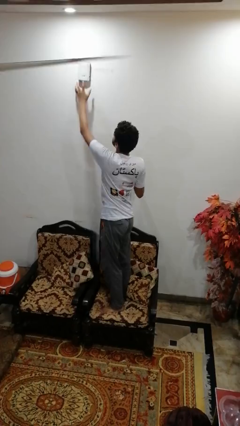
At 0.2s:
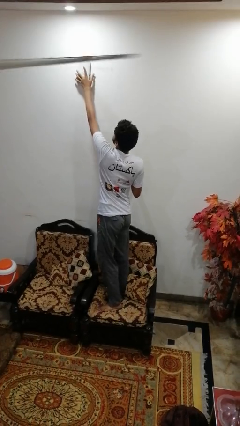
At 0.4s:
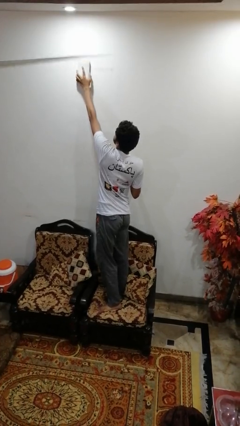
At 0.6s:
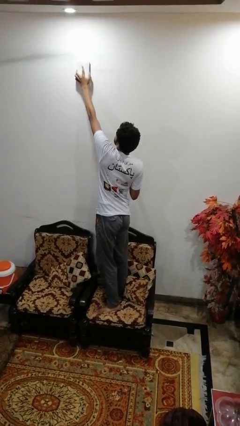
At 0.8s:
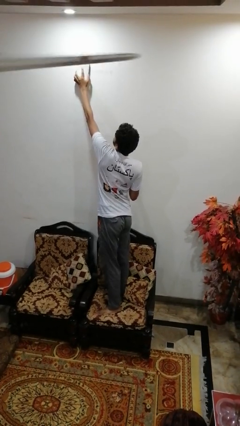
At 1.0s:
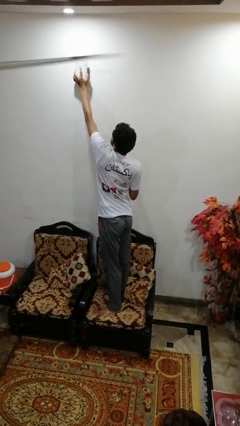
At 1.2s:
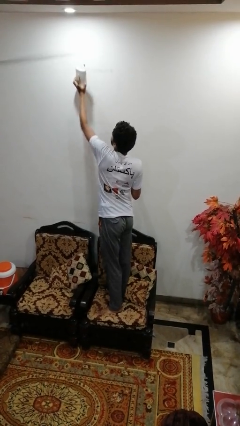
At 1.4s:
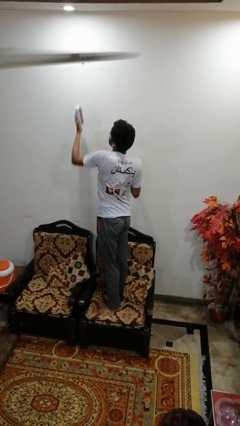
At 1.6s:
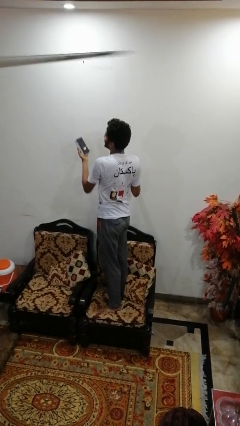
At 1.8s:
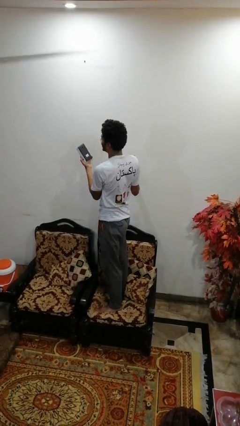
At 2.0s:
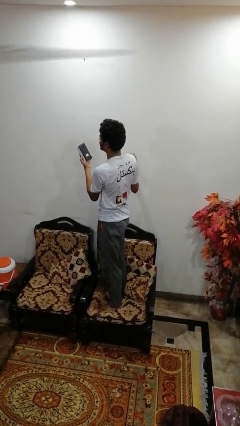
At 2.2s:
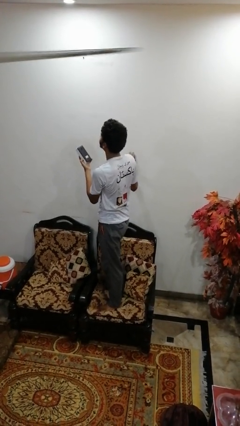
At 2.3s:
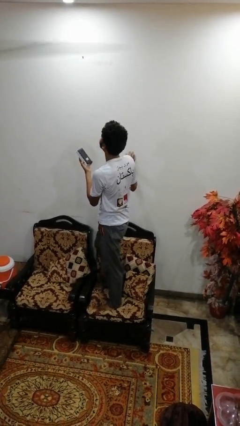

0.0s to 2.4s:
person takes down smoke detector

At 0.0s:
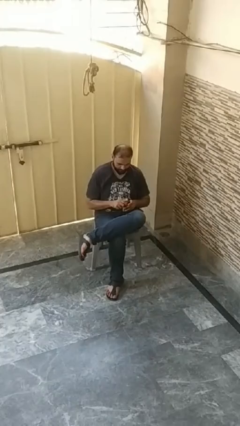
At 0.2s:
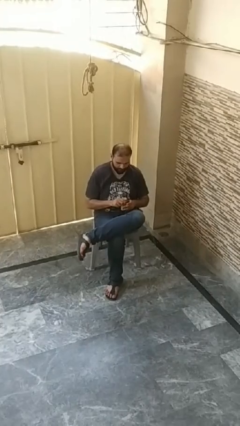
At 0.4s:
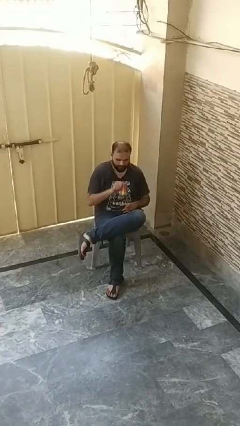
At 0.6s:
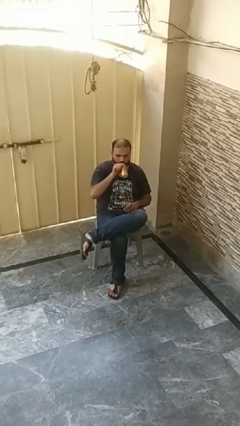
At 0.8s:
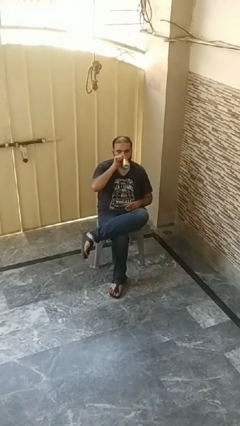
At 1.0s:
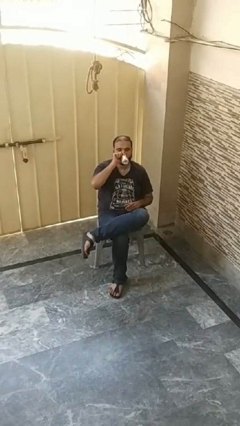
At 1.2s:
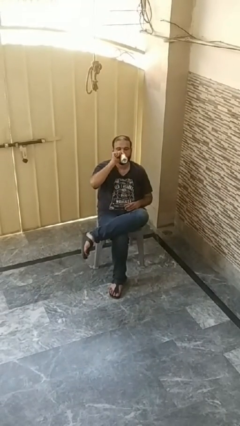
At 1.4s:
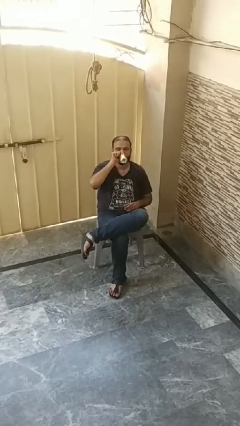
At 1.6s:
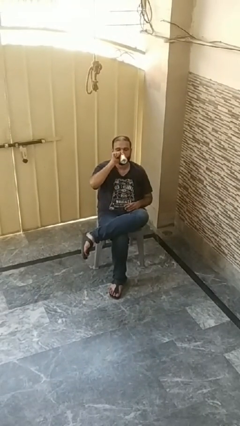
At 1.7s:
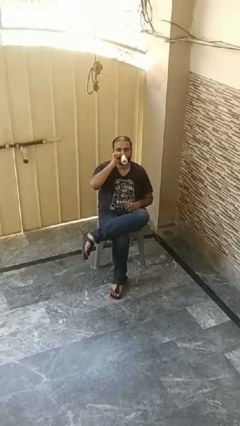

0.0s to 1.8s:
person drinks from beverage can

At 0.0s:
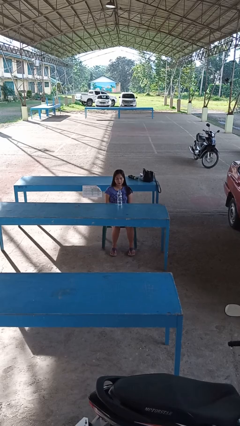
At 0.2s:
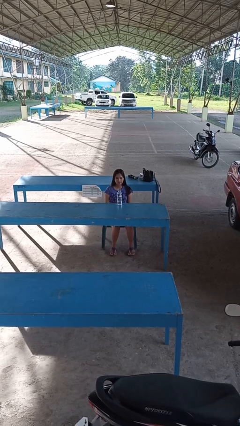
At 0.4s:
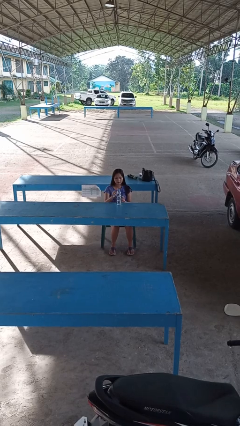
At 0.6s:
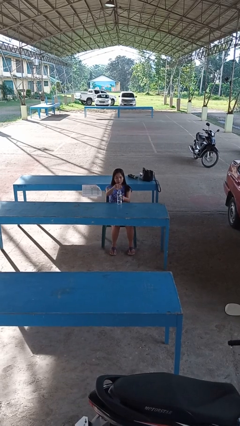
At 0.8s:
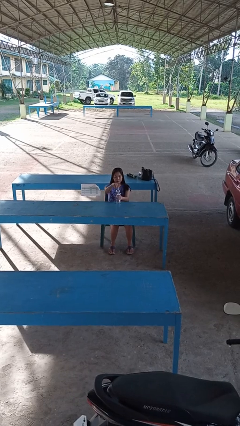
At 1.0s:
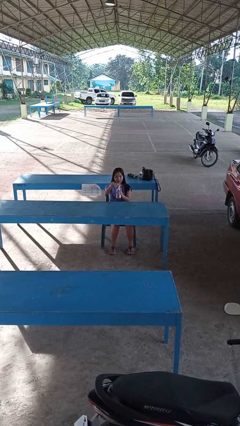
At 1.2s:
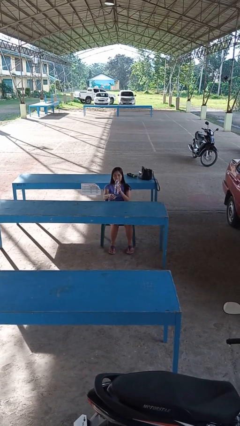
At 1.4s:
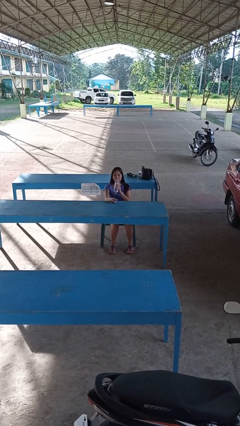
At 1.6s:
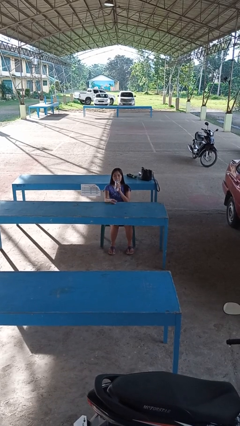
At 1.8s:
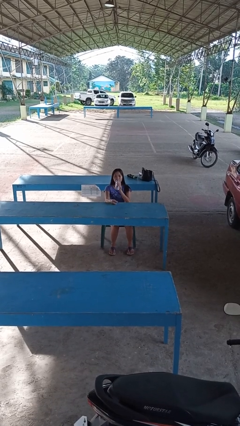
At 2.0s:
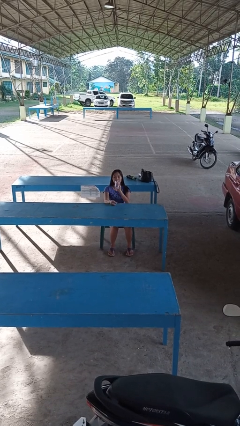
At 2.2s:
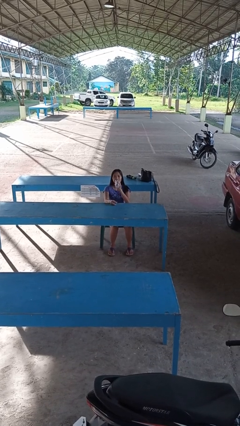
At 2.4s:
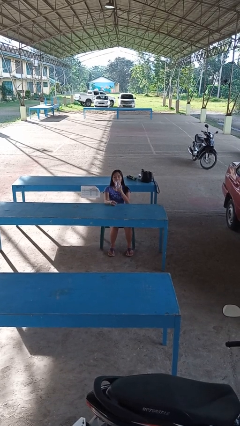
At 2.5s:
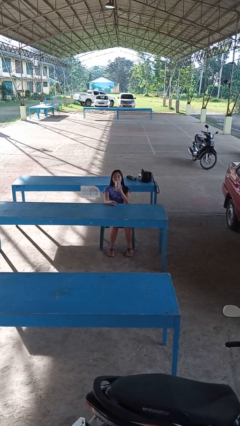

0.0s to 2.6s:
person drinks from bottle

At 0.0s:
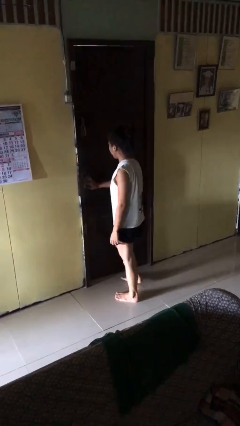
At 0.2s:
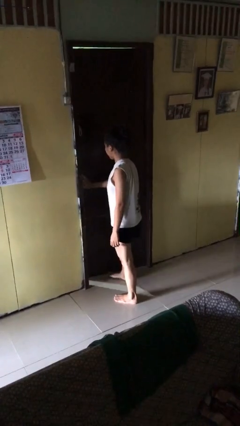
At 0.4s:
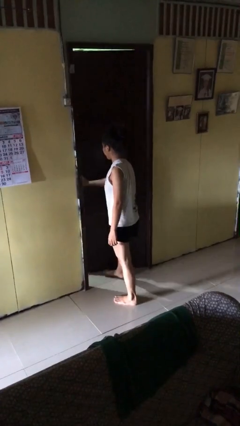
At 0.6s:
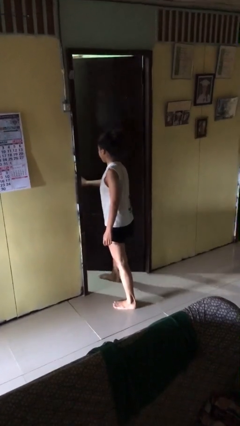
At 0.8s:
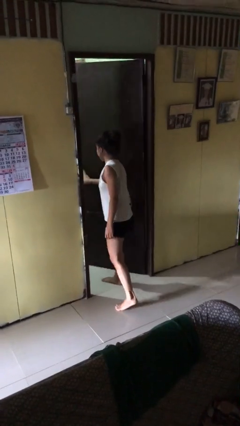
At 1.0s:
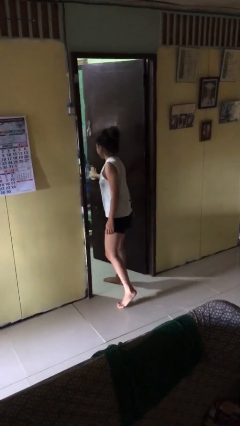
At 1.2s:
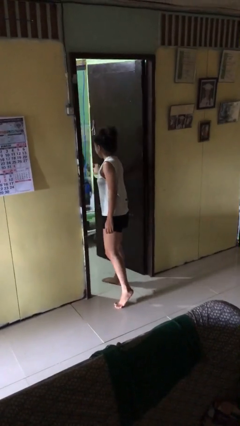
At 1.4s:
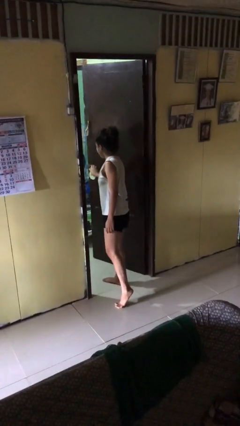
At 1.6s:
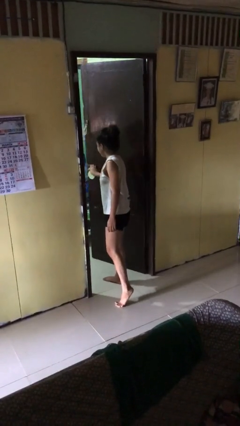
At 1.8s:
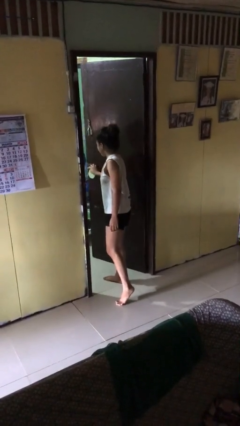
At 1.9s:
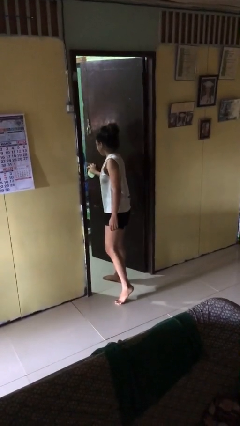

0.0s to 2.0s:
person opens facility door

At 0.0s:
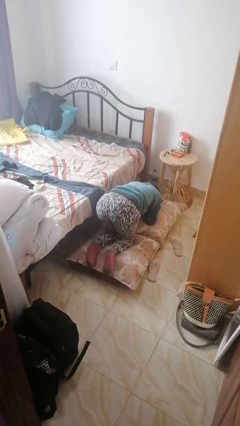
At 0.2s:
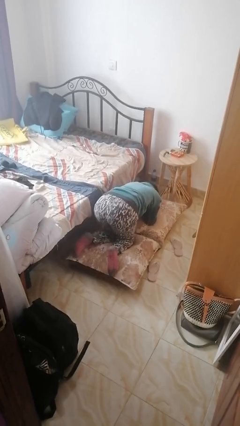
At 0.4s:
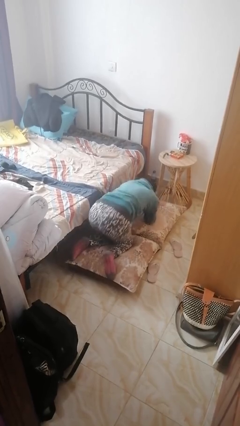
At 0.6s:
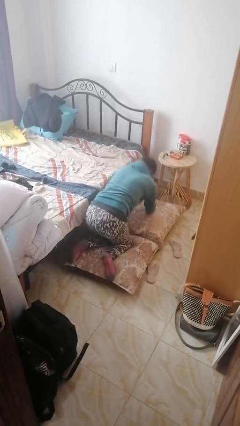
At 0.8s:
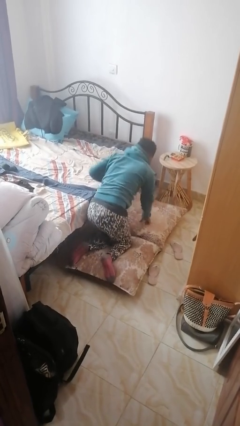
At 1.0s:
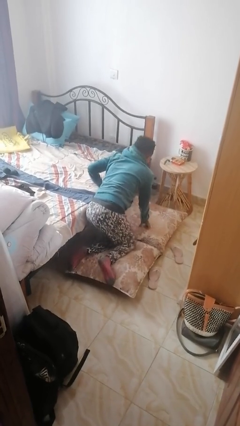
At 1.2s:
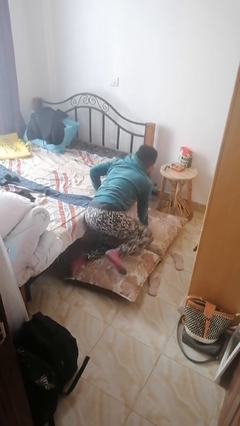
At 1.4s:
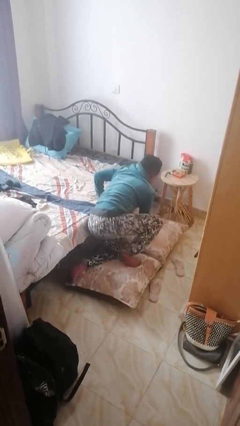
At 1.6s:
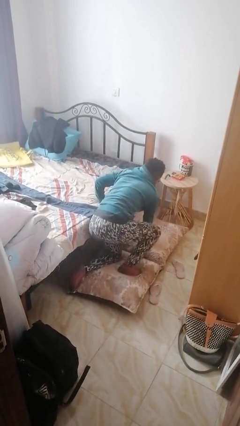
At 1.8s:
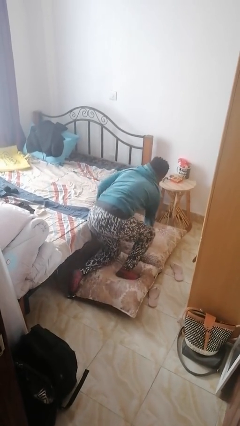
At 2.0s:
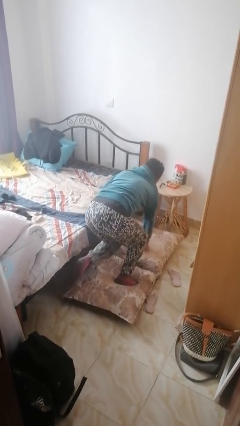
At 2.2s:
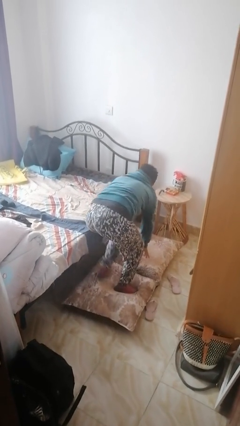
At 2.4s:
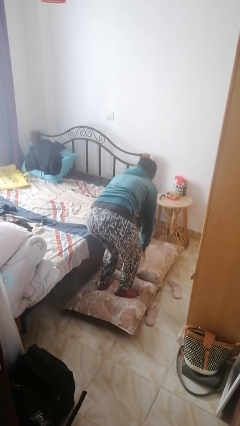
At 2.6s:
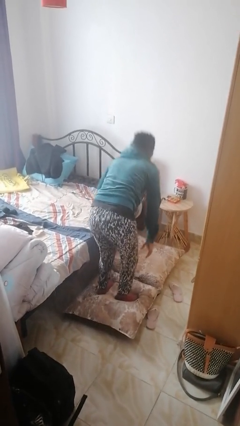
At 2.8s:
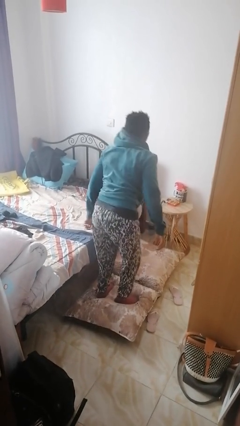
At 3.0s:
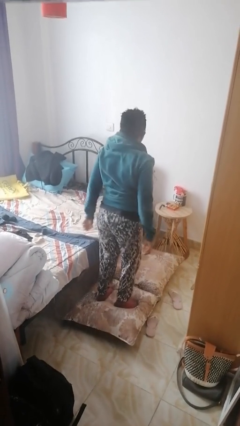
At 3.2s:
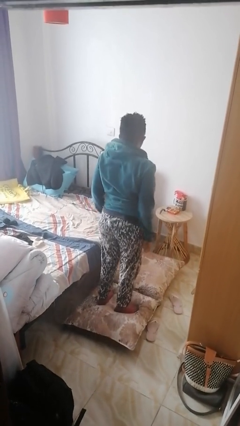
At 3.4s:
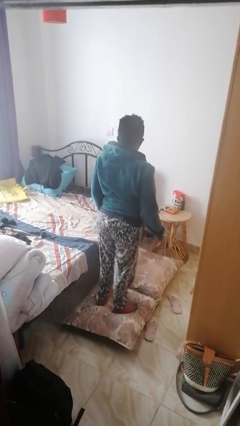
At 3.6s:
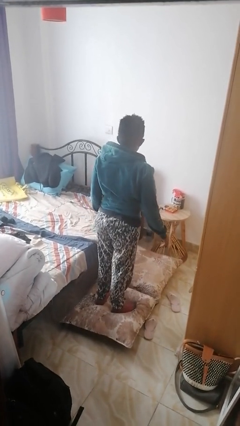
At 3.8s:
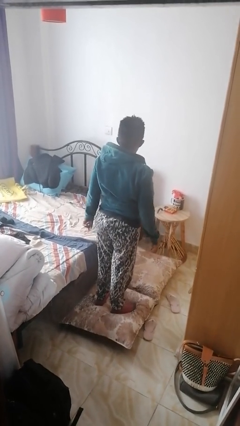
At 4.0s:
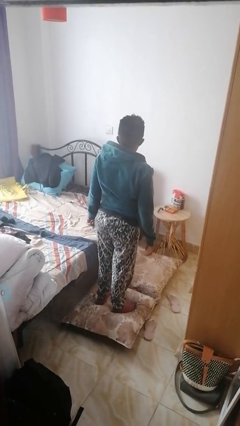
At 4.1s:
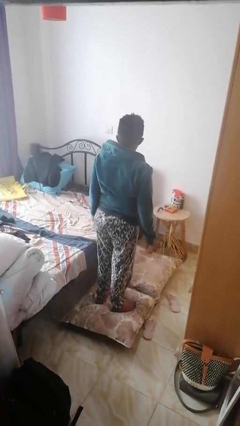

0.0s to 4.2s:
person stands up from floor

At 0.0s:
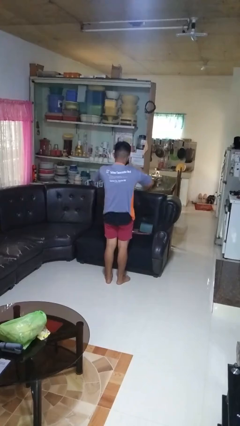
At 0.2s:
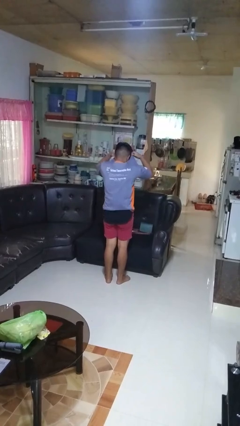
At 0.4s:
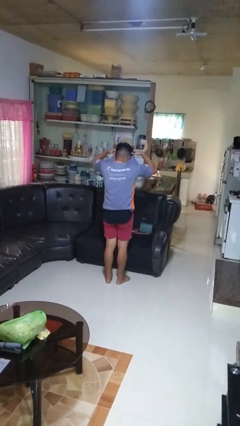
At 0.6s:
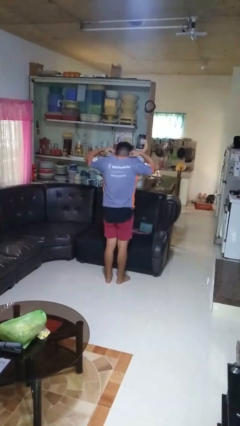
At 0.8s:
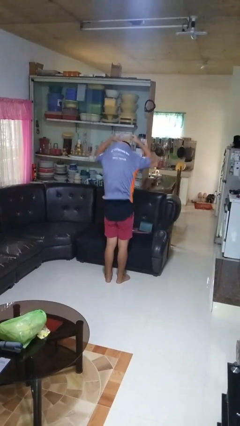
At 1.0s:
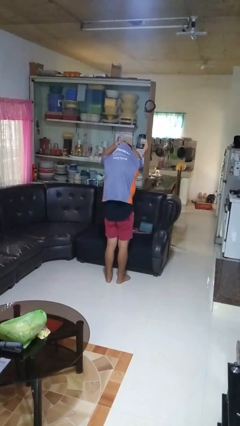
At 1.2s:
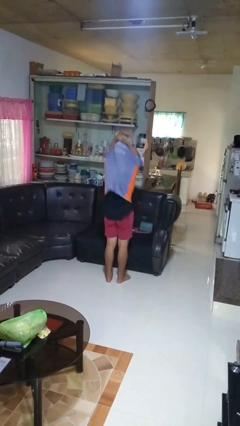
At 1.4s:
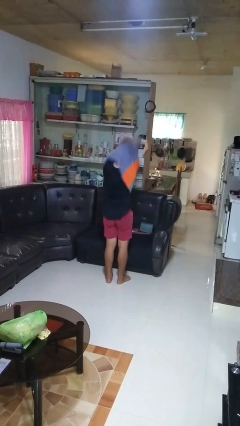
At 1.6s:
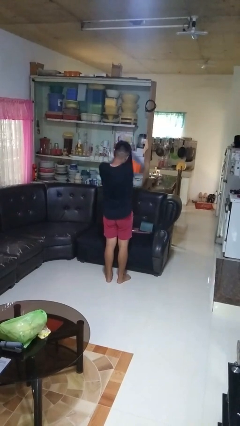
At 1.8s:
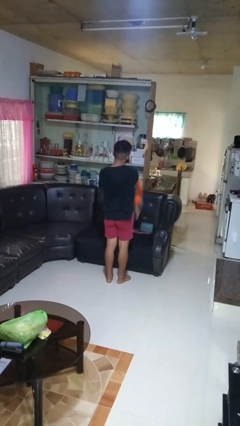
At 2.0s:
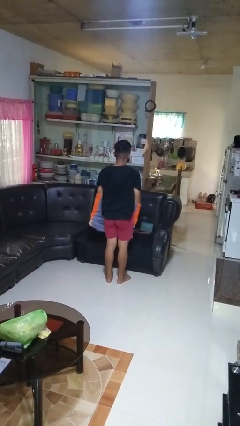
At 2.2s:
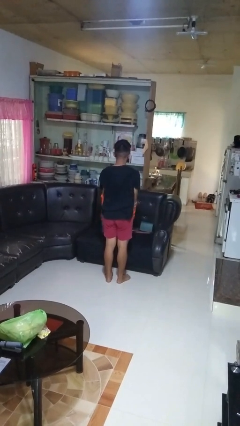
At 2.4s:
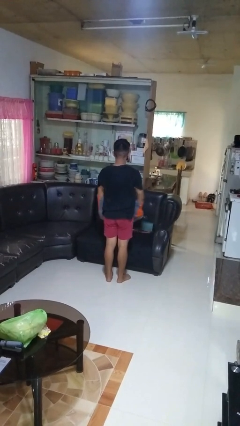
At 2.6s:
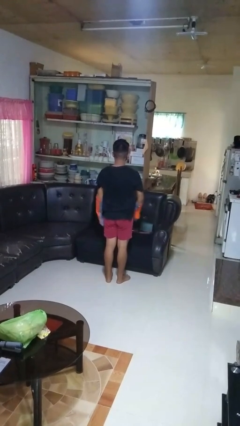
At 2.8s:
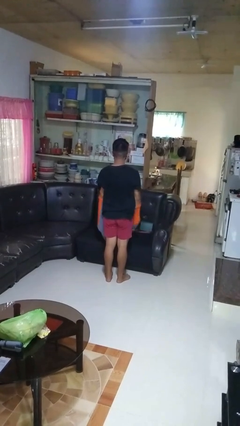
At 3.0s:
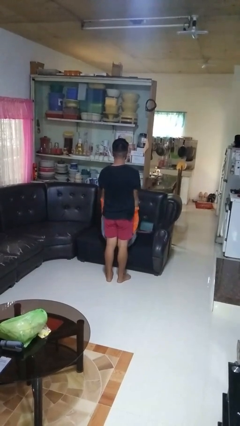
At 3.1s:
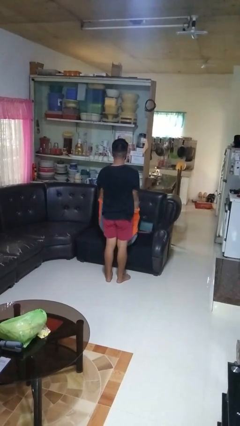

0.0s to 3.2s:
person takes off shirt

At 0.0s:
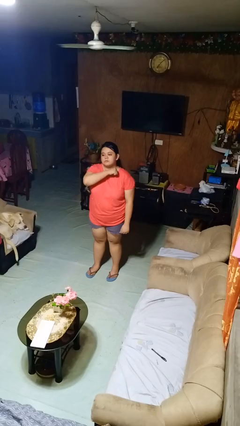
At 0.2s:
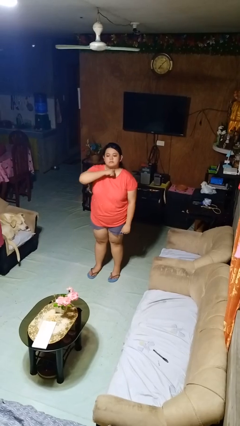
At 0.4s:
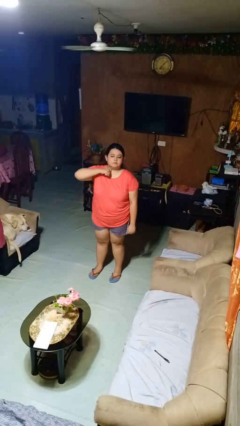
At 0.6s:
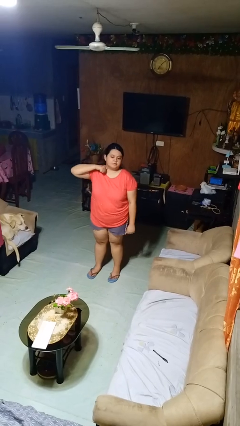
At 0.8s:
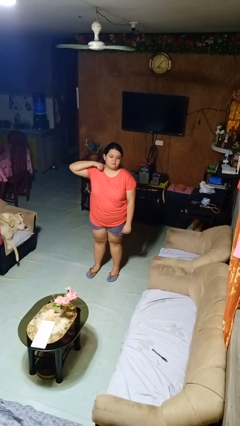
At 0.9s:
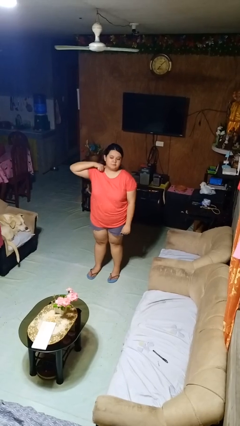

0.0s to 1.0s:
person gestures cut
